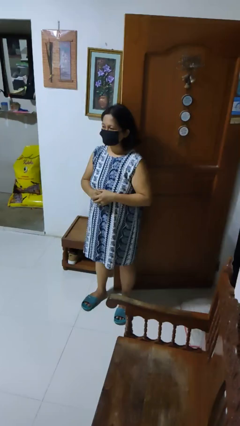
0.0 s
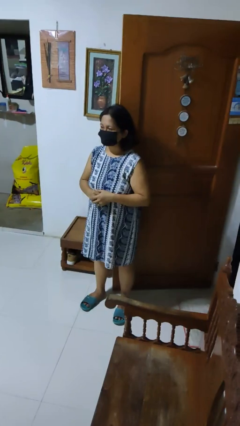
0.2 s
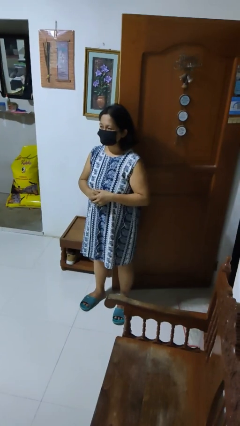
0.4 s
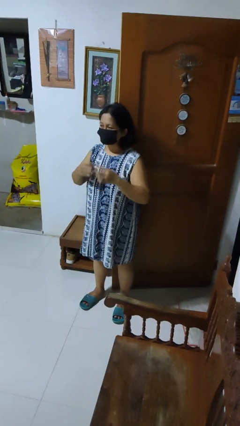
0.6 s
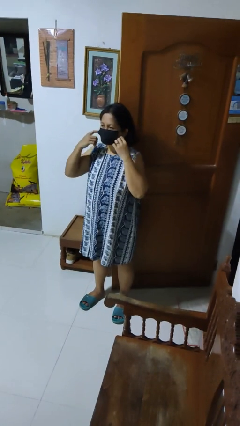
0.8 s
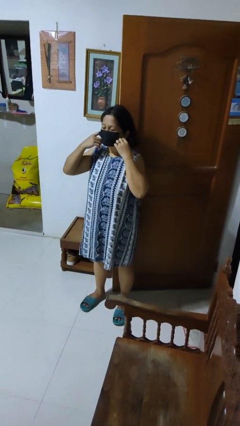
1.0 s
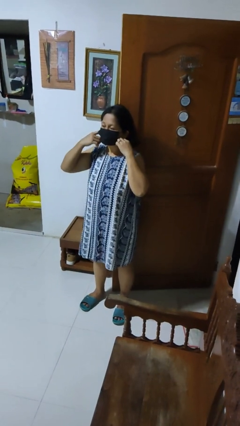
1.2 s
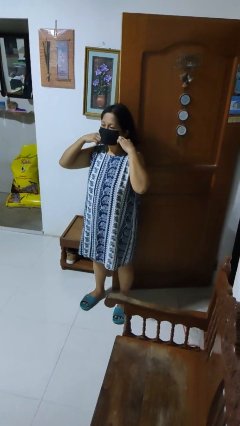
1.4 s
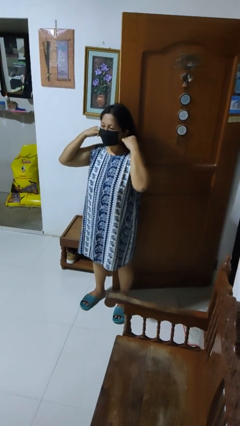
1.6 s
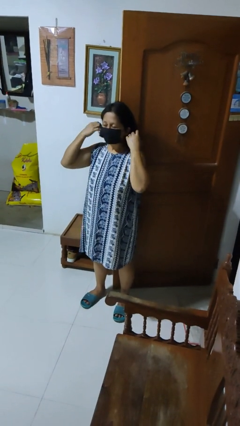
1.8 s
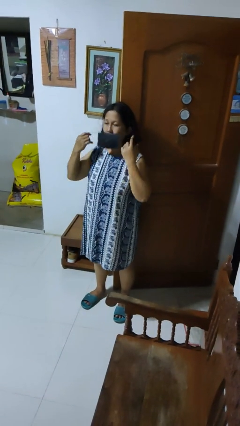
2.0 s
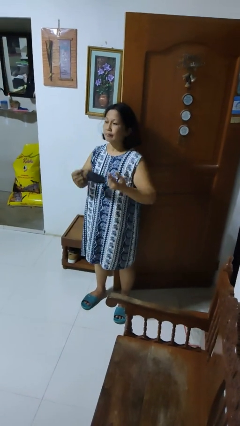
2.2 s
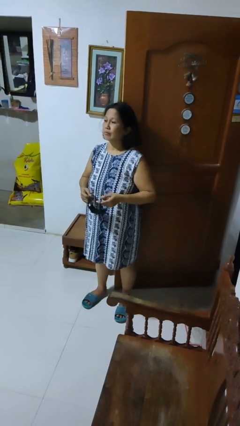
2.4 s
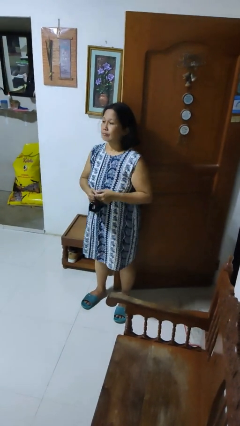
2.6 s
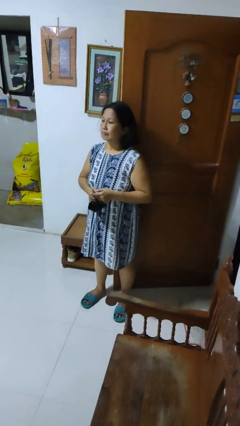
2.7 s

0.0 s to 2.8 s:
person takes off facemask

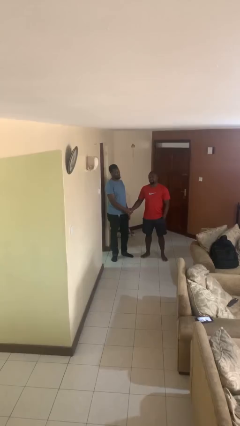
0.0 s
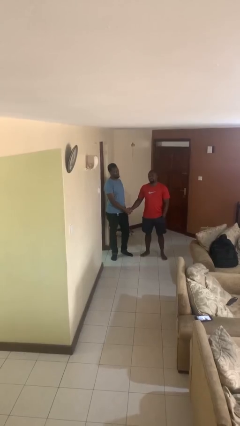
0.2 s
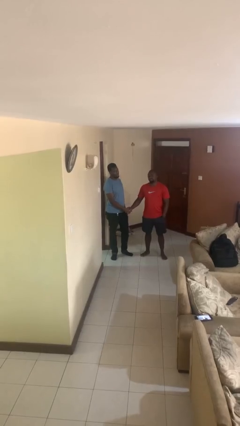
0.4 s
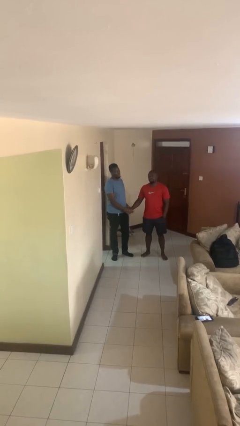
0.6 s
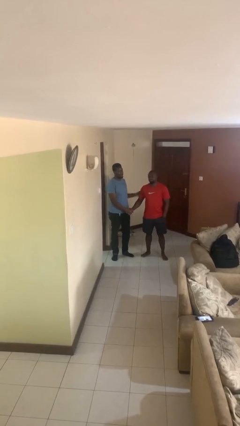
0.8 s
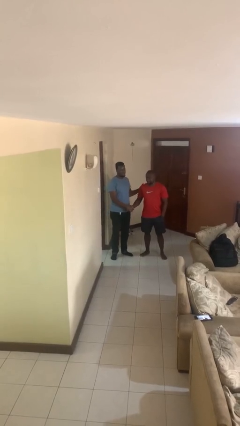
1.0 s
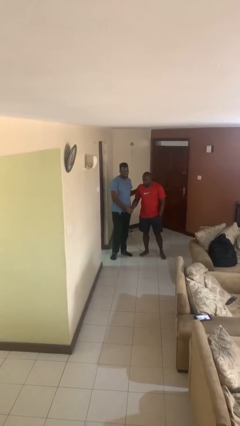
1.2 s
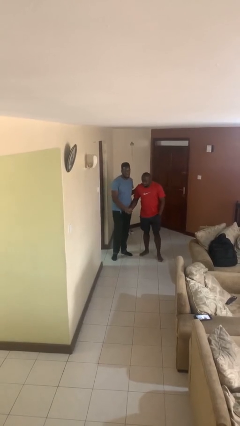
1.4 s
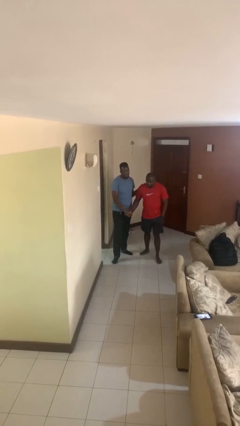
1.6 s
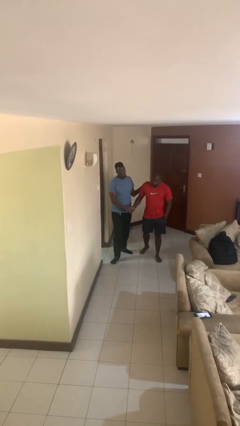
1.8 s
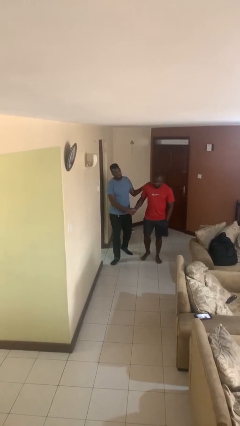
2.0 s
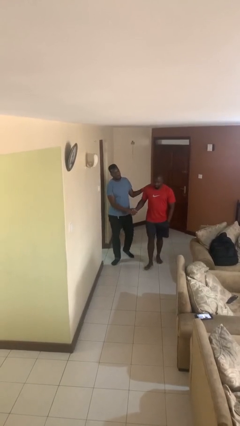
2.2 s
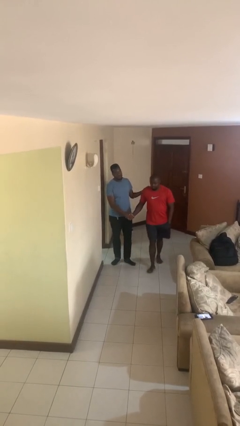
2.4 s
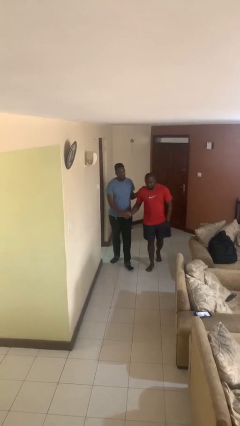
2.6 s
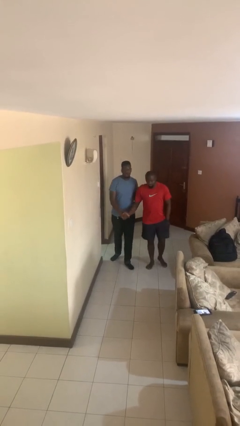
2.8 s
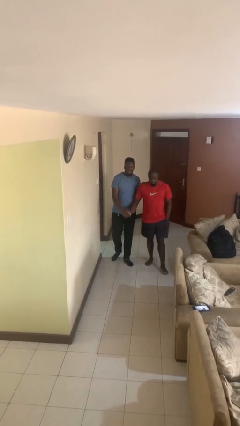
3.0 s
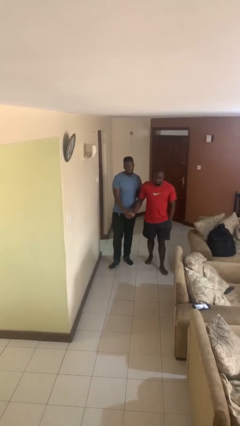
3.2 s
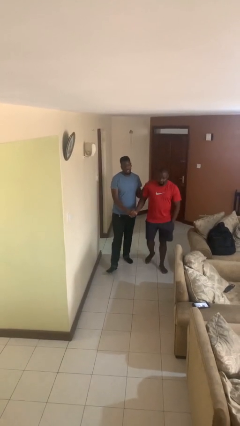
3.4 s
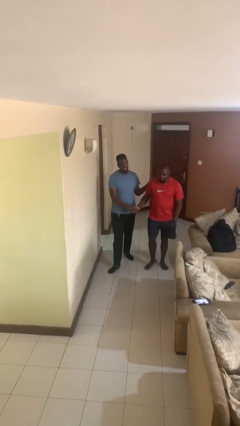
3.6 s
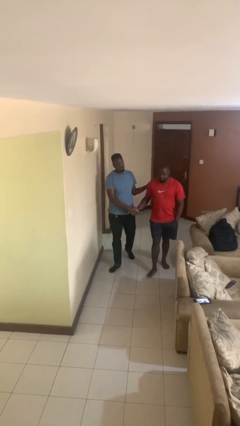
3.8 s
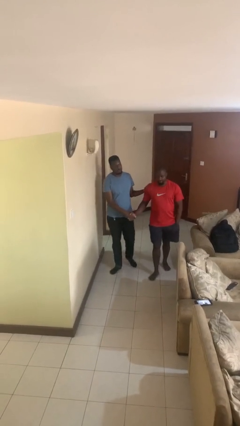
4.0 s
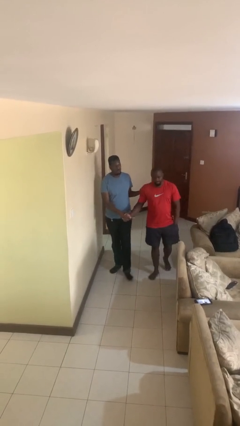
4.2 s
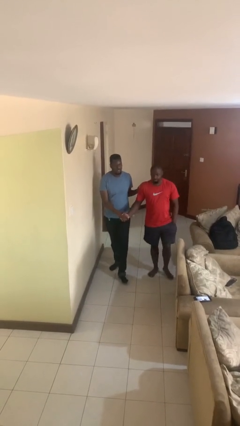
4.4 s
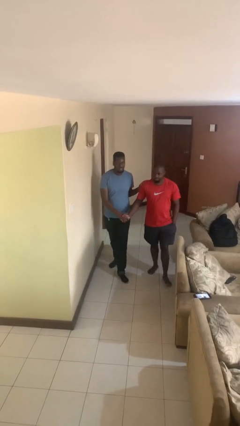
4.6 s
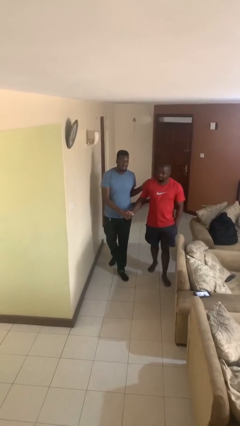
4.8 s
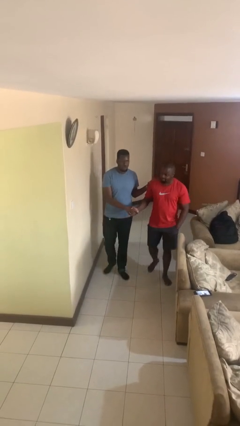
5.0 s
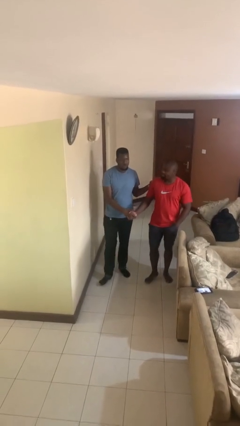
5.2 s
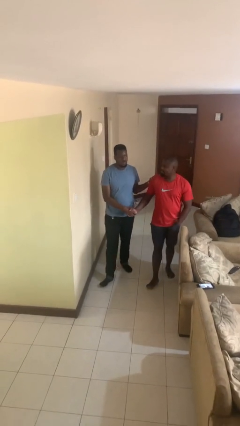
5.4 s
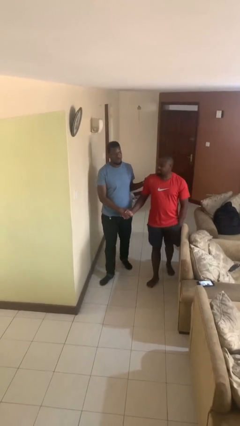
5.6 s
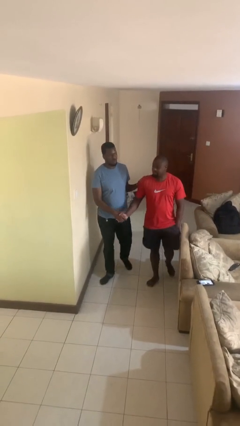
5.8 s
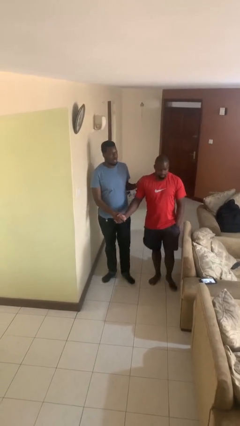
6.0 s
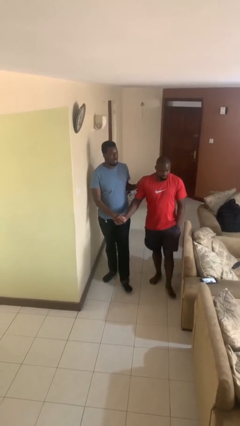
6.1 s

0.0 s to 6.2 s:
person holds hand

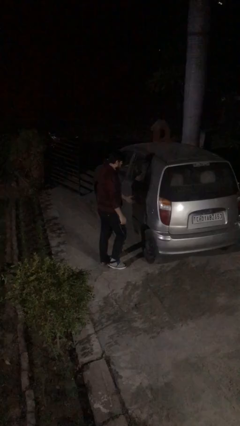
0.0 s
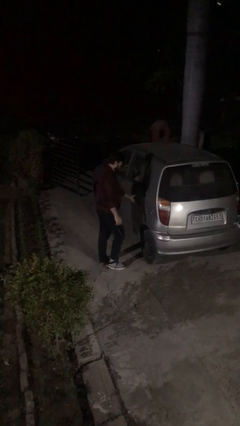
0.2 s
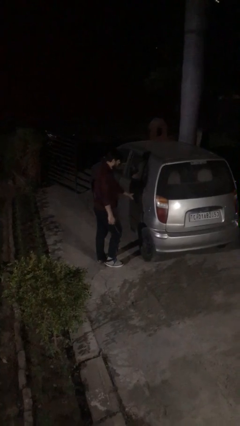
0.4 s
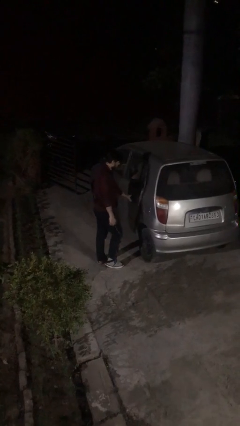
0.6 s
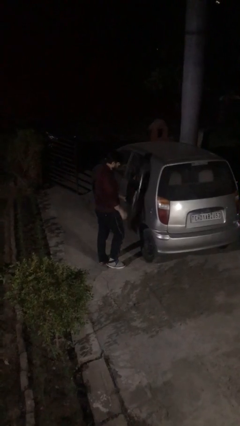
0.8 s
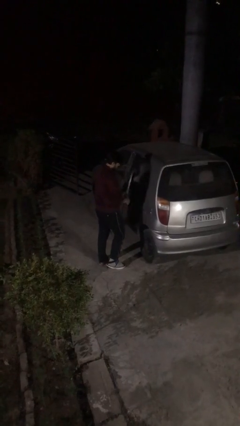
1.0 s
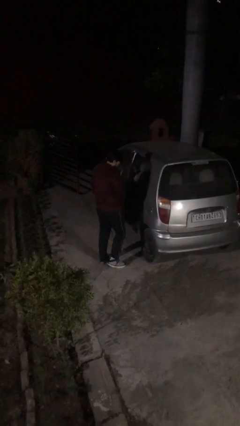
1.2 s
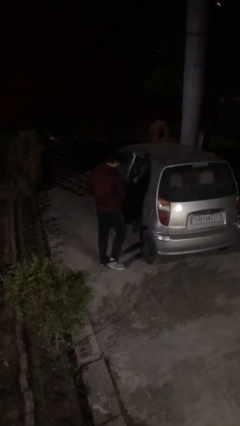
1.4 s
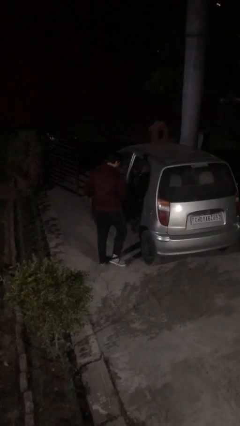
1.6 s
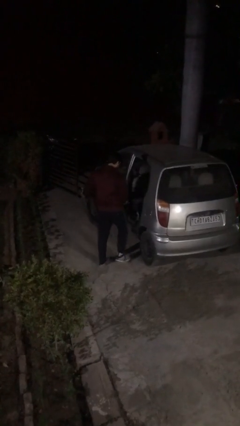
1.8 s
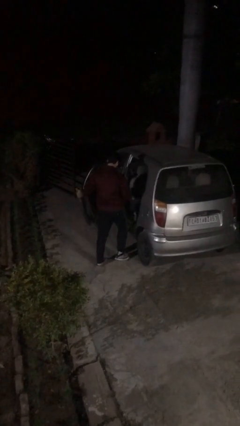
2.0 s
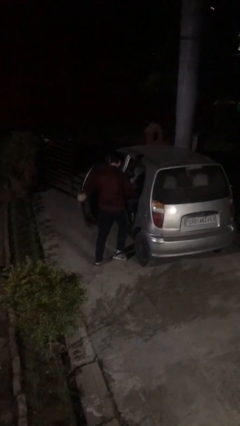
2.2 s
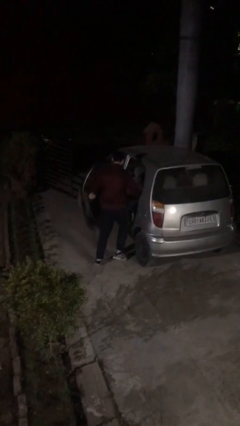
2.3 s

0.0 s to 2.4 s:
person opens car door

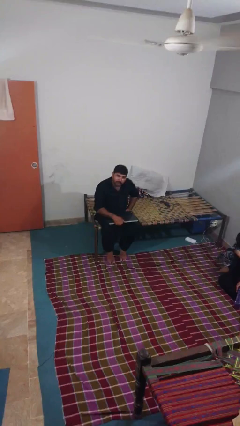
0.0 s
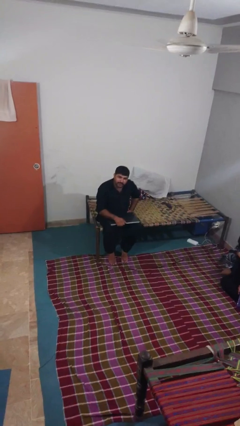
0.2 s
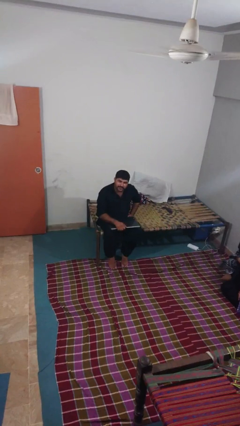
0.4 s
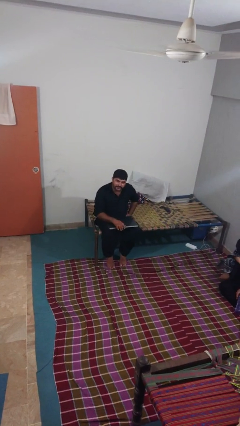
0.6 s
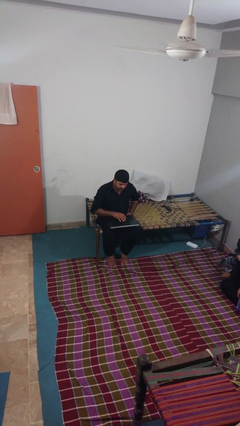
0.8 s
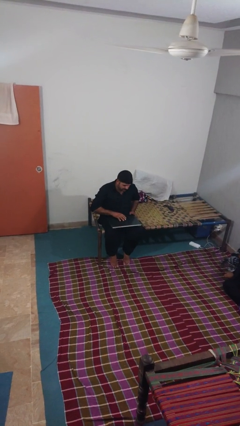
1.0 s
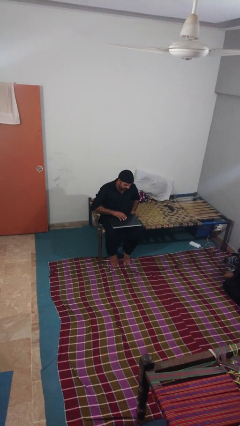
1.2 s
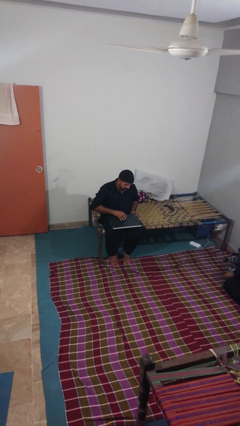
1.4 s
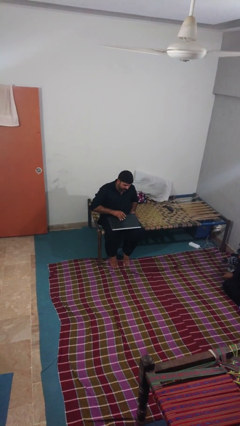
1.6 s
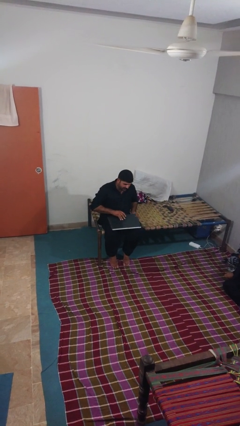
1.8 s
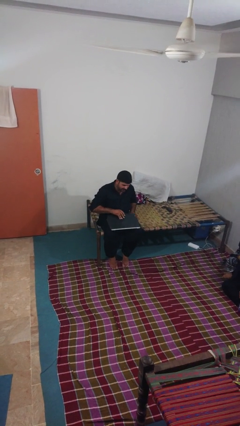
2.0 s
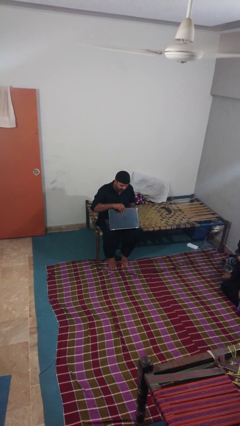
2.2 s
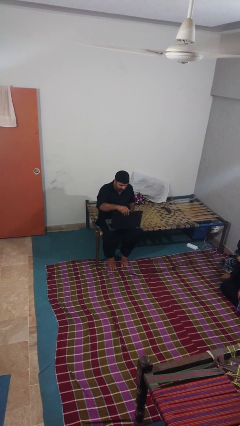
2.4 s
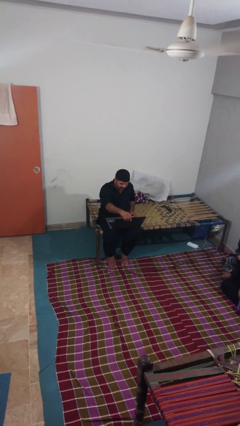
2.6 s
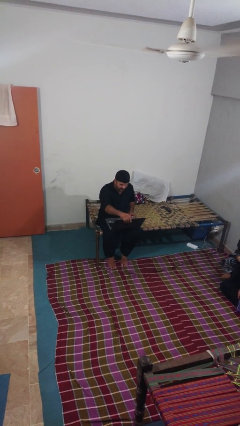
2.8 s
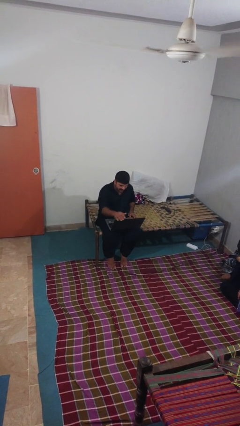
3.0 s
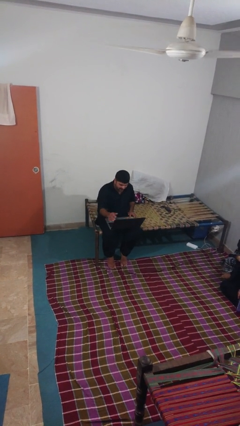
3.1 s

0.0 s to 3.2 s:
person opens laptop

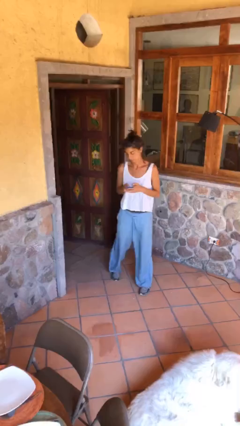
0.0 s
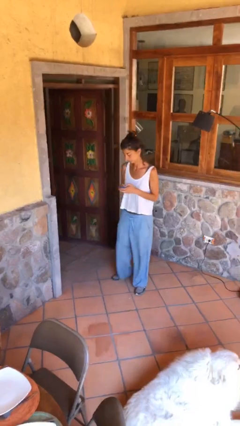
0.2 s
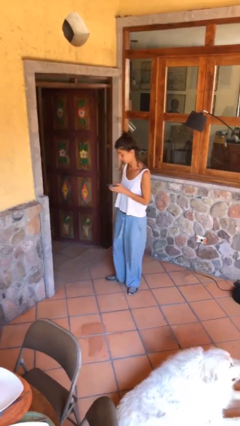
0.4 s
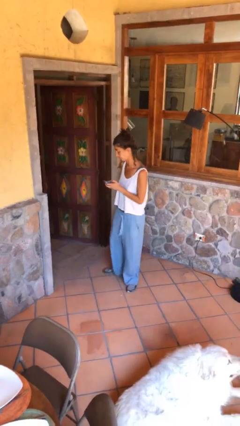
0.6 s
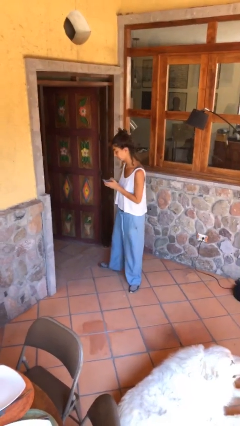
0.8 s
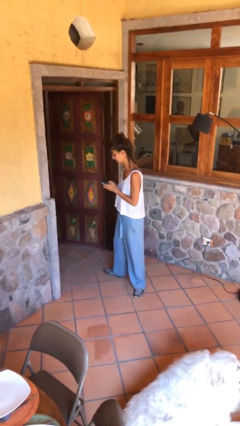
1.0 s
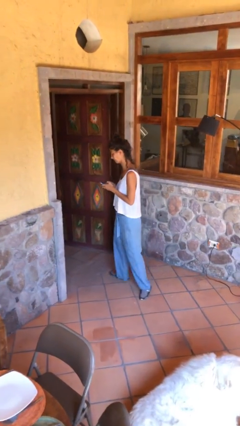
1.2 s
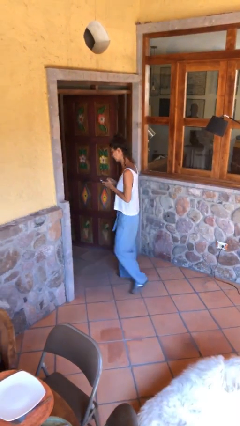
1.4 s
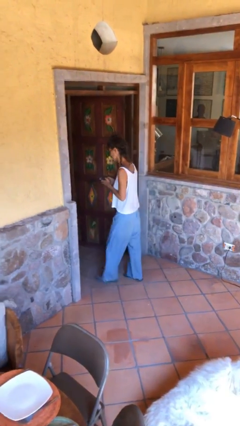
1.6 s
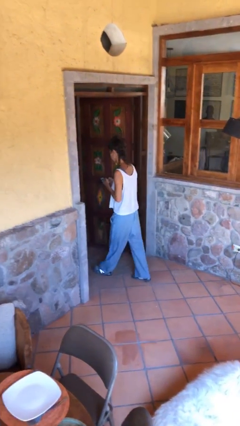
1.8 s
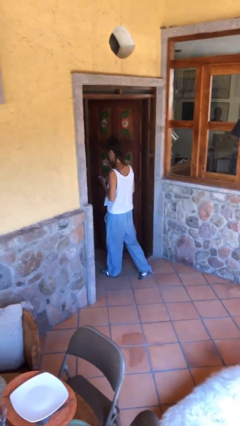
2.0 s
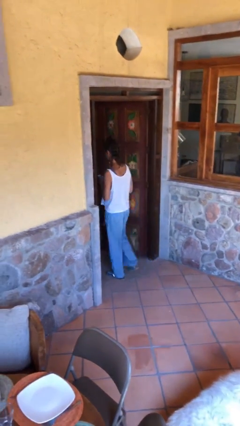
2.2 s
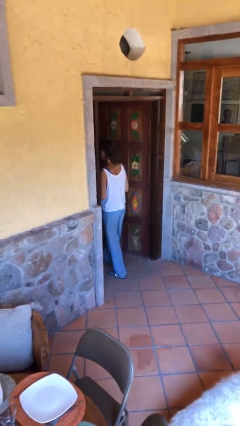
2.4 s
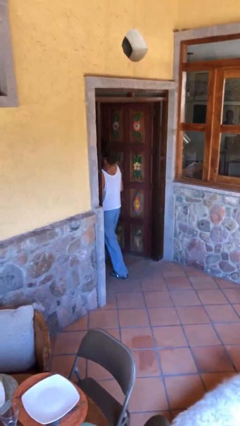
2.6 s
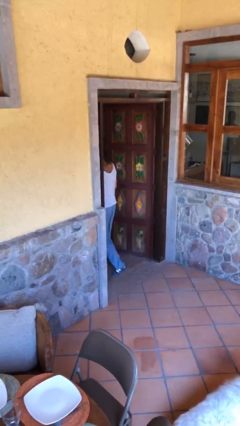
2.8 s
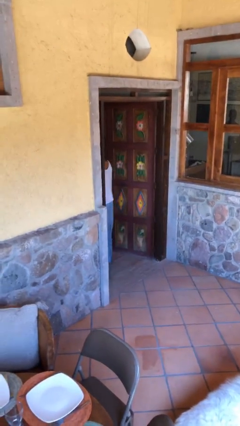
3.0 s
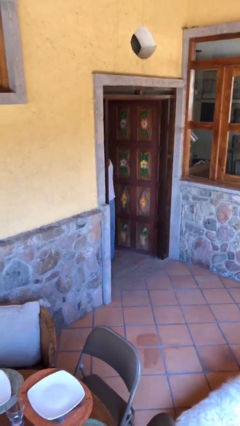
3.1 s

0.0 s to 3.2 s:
person exits scene through structure
